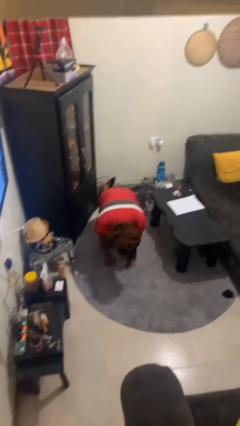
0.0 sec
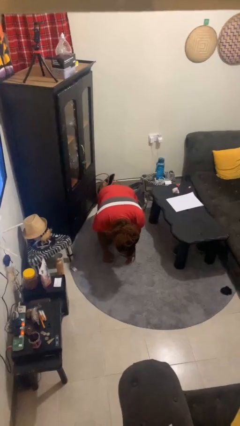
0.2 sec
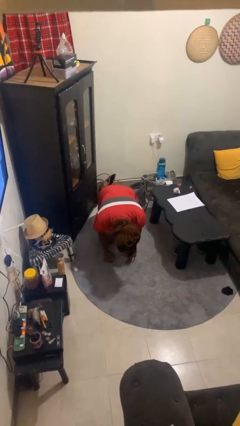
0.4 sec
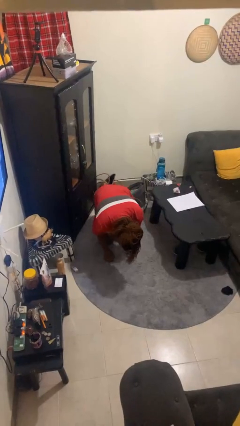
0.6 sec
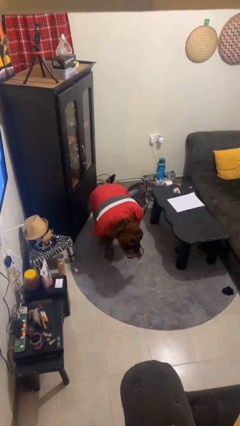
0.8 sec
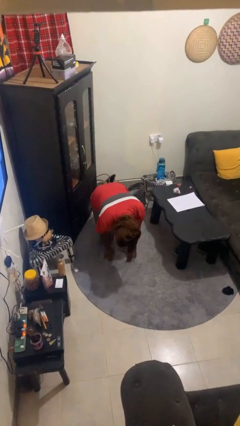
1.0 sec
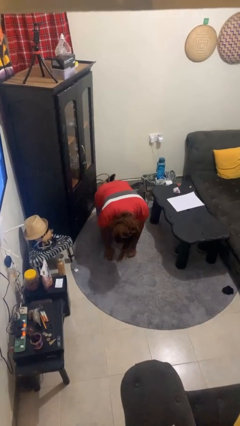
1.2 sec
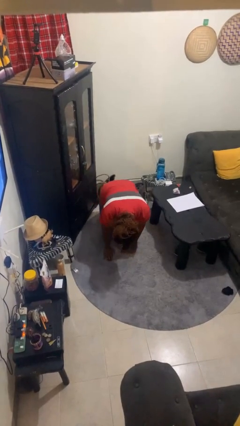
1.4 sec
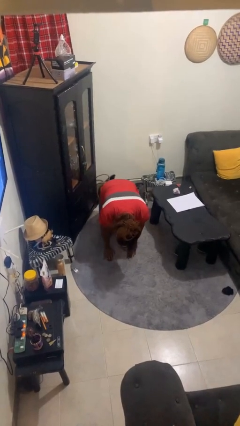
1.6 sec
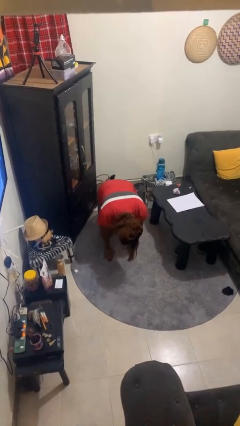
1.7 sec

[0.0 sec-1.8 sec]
person crawls

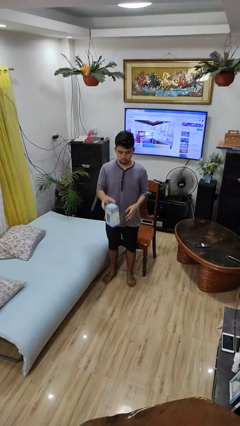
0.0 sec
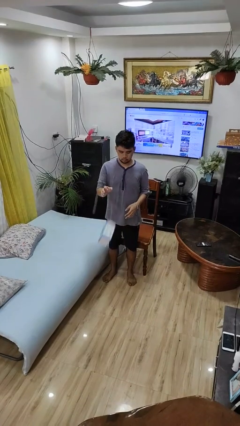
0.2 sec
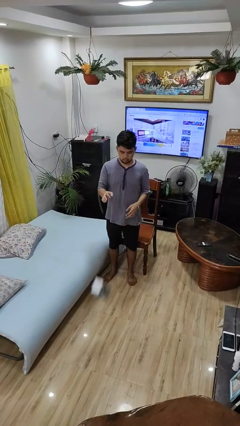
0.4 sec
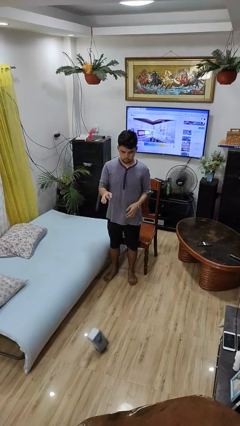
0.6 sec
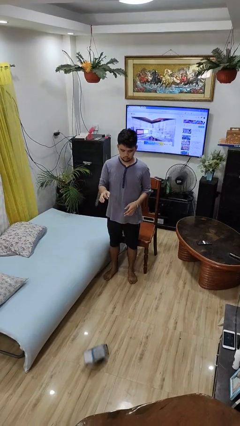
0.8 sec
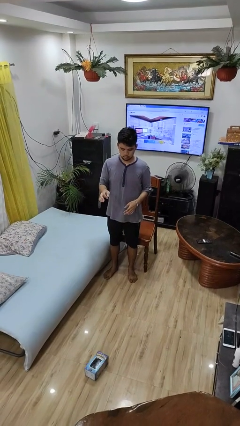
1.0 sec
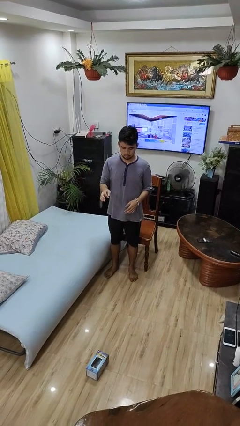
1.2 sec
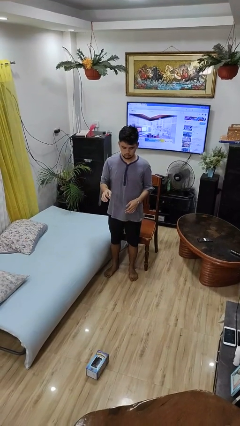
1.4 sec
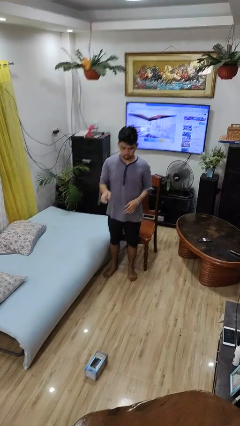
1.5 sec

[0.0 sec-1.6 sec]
person throws object to ground

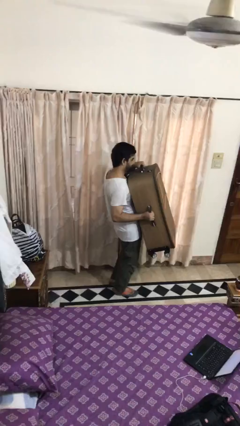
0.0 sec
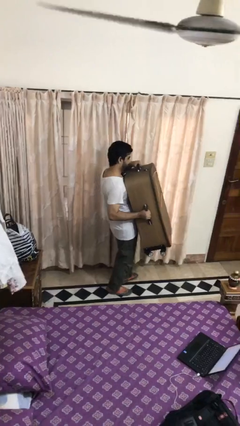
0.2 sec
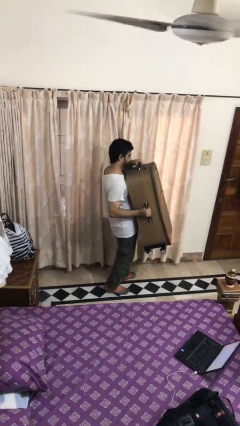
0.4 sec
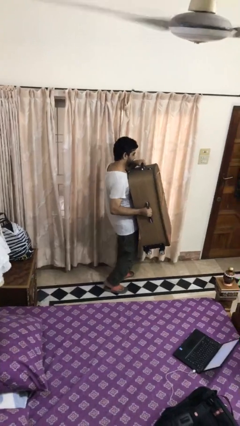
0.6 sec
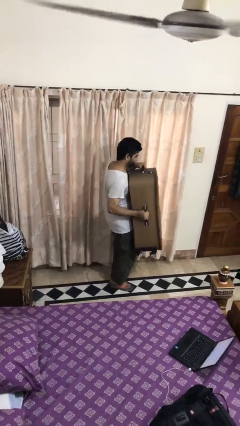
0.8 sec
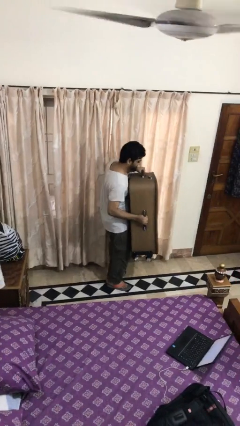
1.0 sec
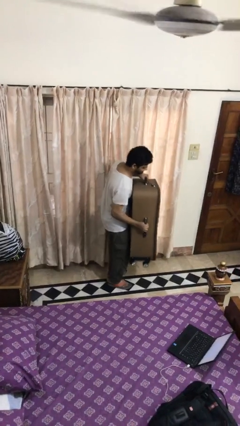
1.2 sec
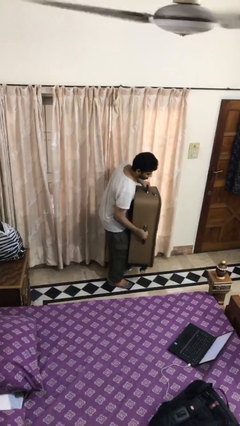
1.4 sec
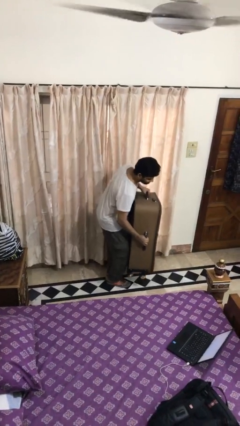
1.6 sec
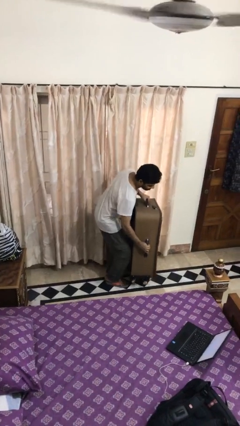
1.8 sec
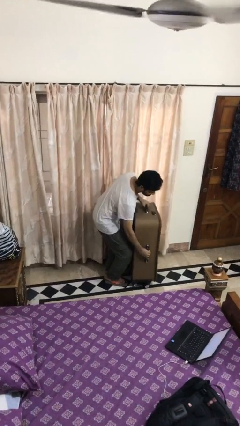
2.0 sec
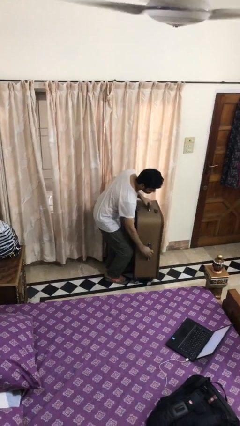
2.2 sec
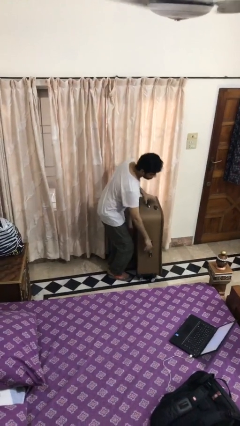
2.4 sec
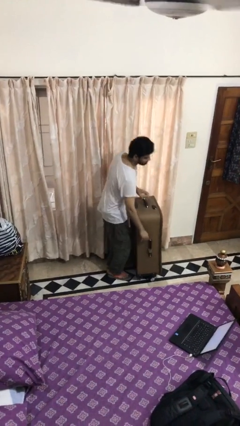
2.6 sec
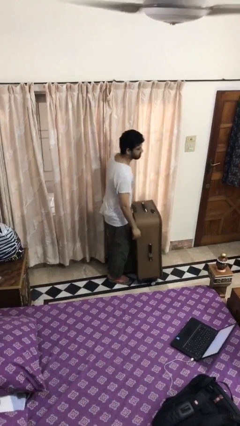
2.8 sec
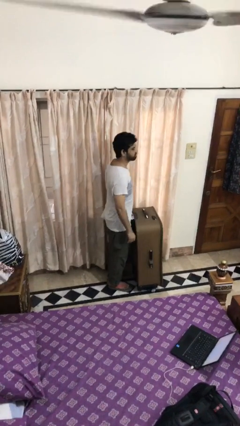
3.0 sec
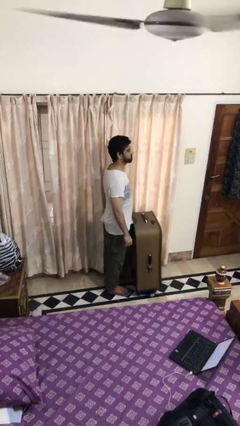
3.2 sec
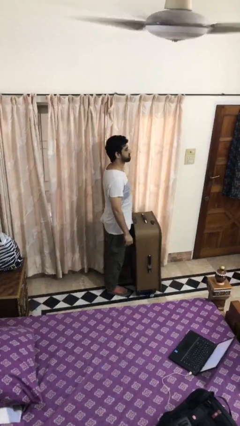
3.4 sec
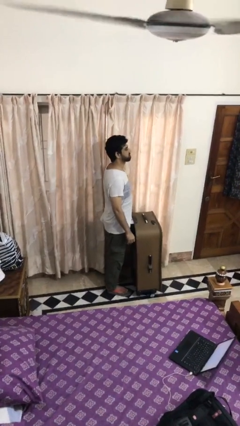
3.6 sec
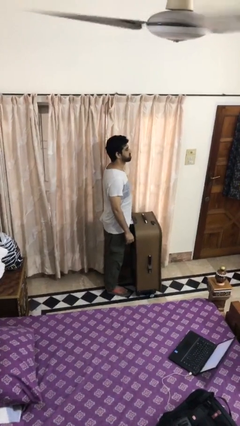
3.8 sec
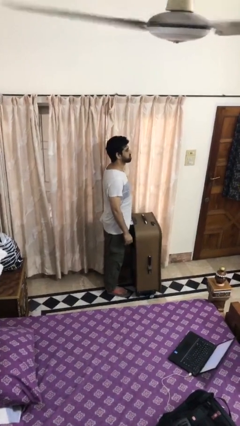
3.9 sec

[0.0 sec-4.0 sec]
person puts down object on floor

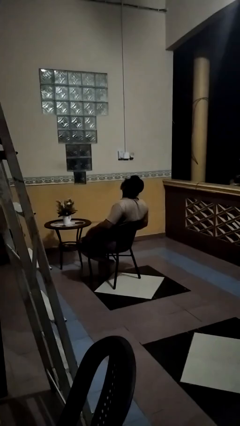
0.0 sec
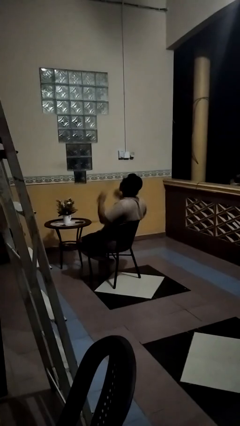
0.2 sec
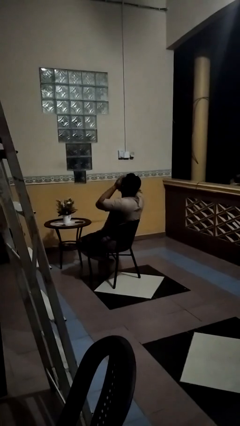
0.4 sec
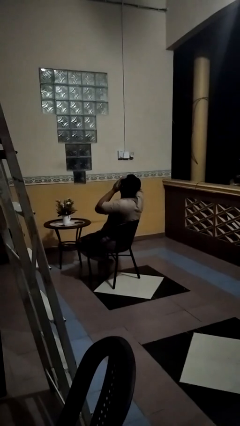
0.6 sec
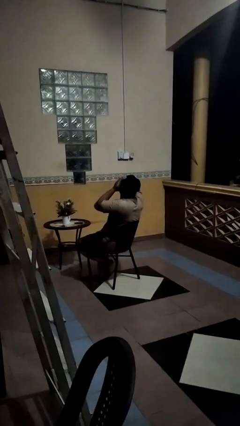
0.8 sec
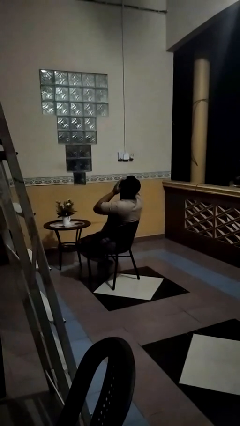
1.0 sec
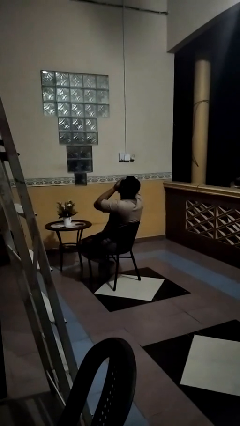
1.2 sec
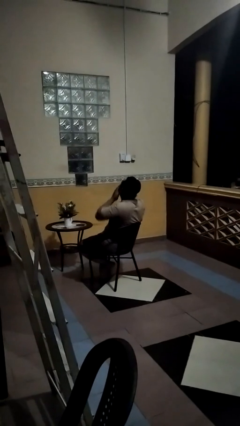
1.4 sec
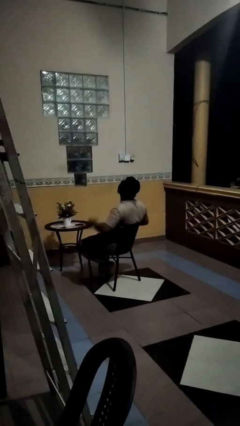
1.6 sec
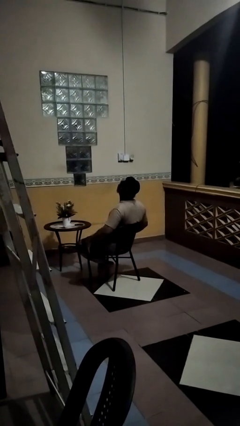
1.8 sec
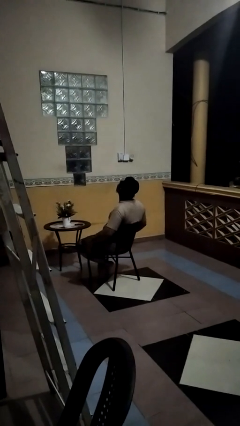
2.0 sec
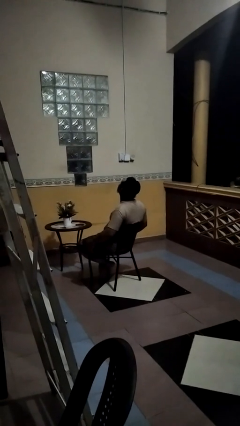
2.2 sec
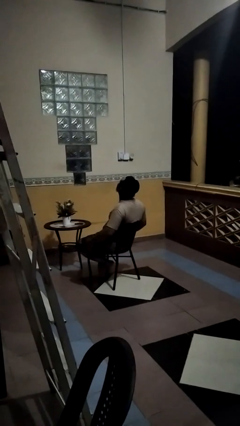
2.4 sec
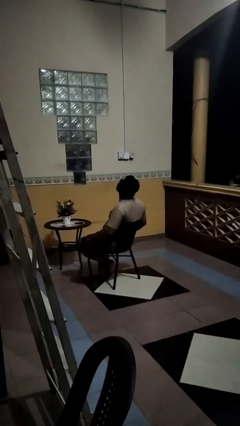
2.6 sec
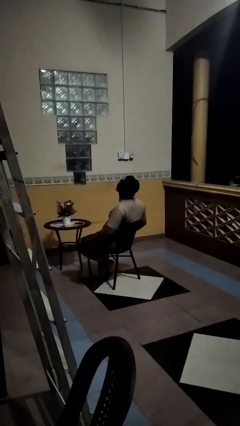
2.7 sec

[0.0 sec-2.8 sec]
person covers face with hands

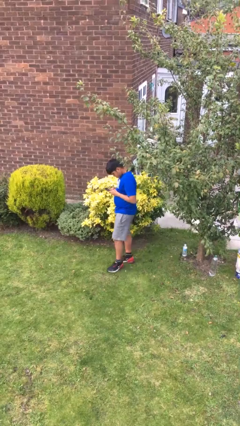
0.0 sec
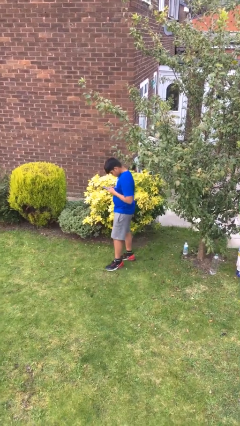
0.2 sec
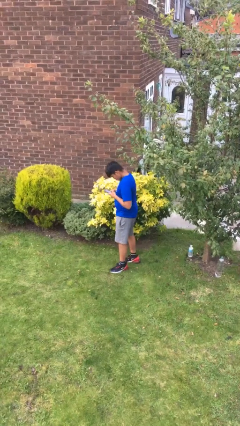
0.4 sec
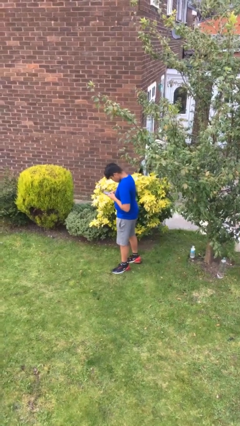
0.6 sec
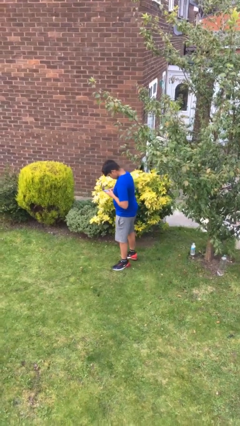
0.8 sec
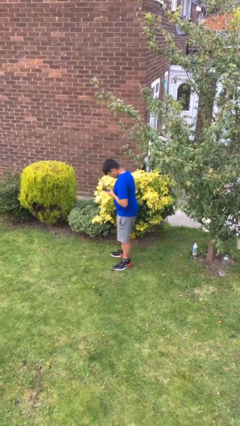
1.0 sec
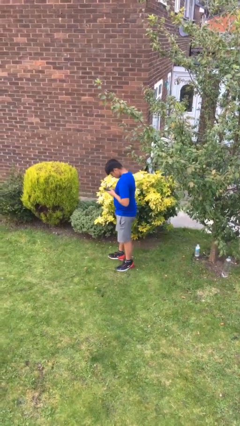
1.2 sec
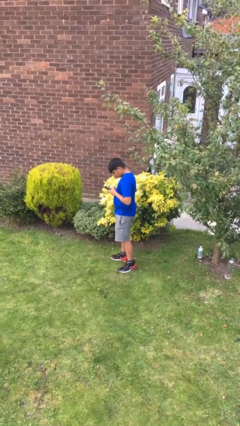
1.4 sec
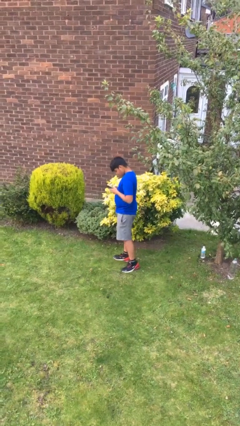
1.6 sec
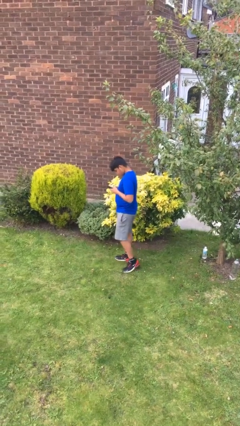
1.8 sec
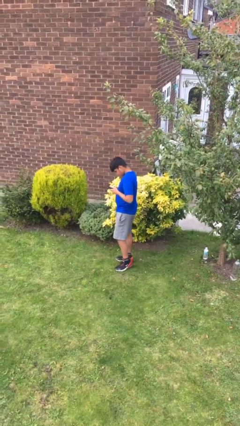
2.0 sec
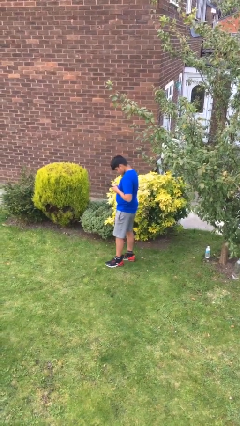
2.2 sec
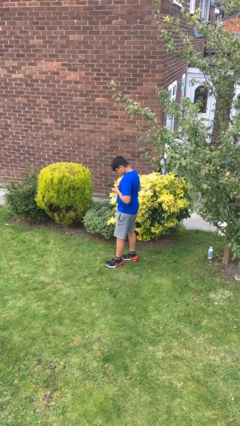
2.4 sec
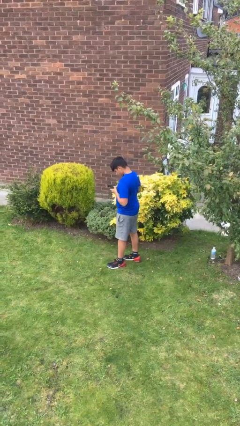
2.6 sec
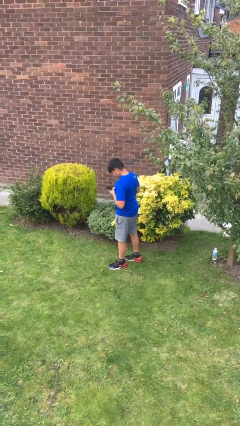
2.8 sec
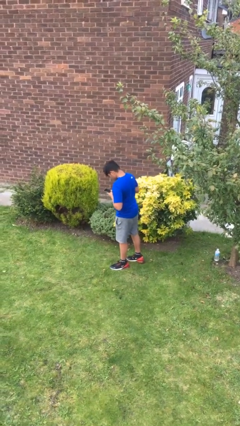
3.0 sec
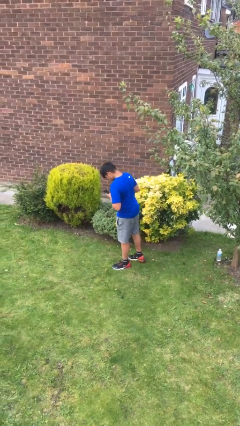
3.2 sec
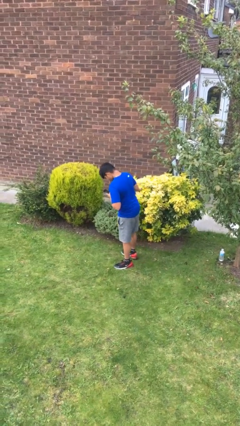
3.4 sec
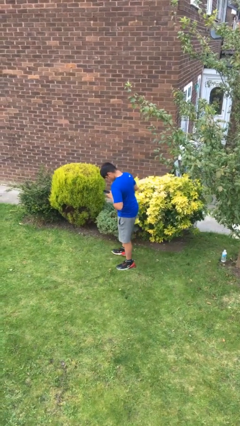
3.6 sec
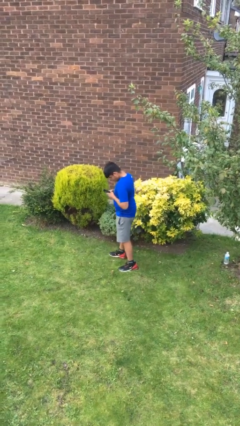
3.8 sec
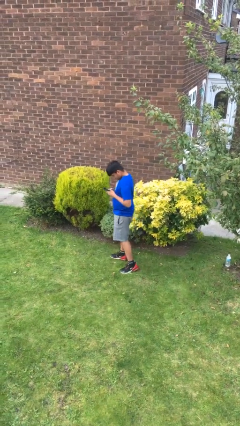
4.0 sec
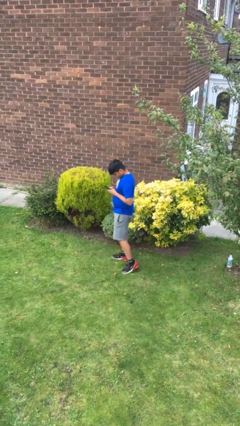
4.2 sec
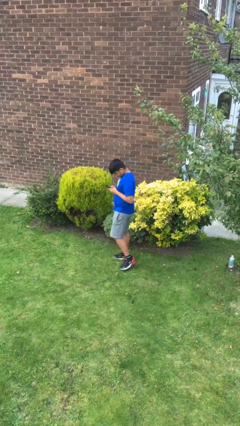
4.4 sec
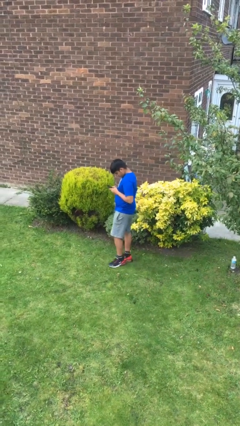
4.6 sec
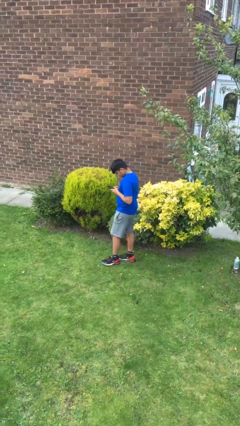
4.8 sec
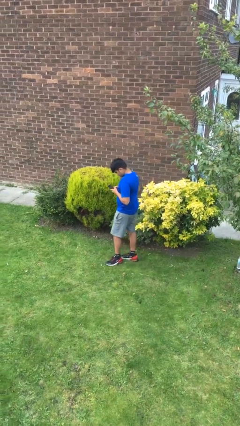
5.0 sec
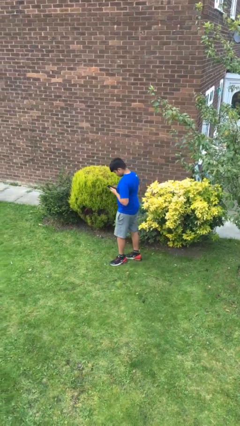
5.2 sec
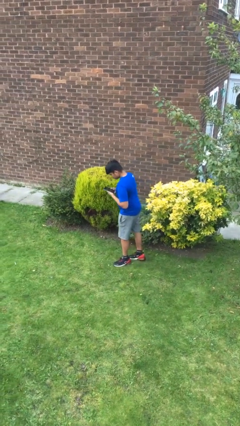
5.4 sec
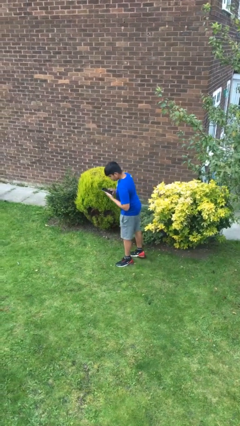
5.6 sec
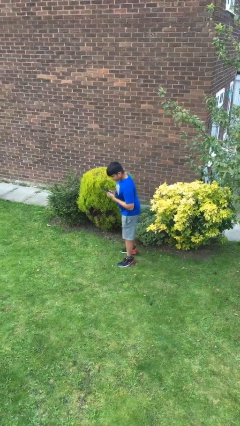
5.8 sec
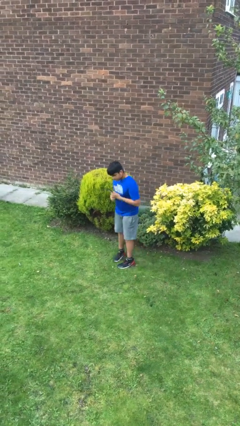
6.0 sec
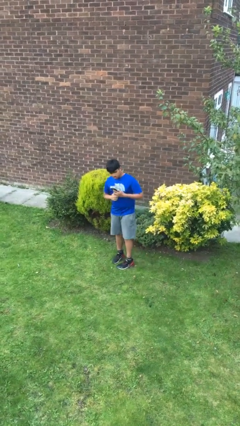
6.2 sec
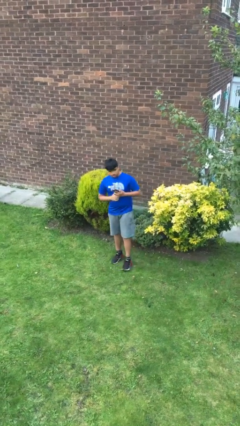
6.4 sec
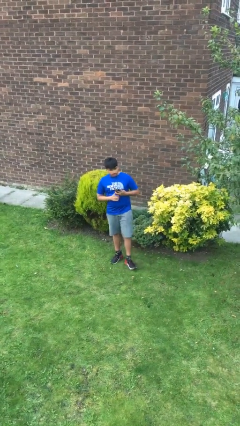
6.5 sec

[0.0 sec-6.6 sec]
person texts on phone

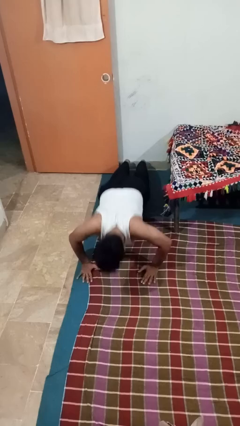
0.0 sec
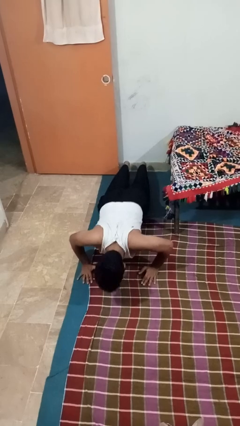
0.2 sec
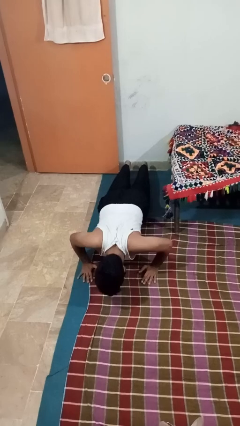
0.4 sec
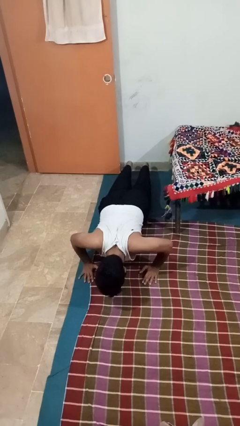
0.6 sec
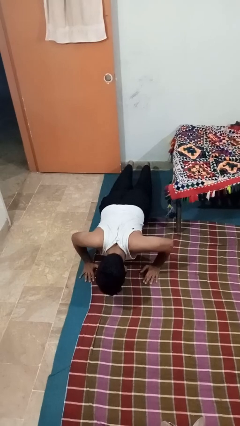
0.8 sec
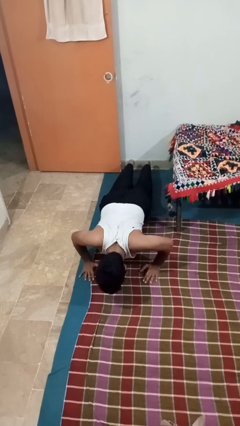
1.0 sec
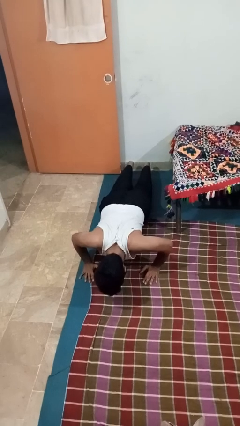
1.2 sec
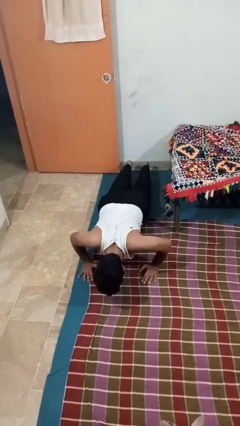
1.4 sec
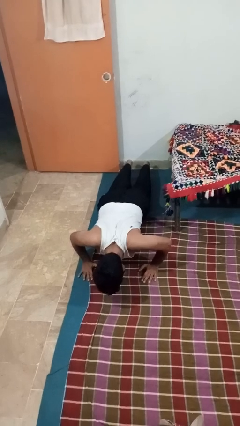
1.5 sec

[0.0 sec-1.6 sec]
person exercises with pushup
